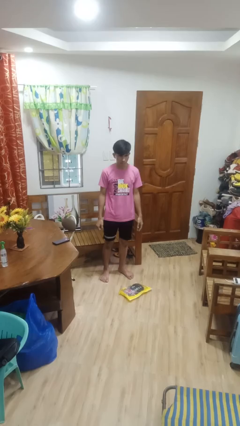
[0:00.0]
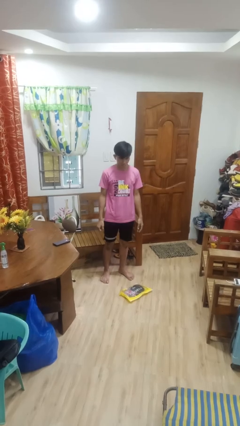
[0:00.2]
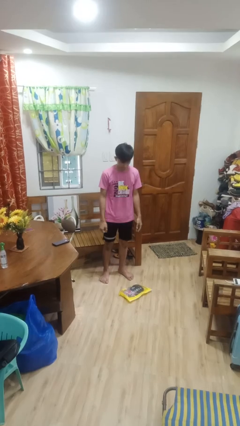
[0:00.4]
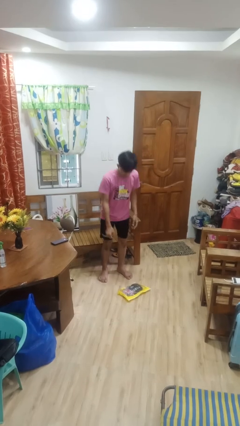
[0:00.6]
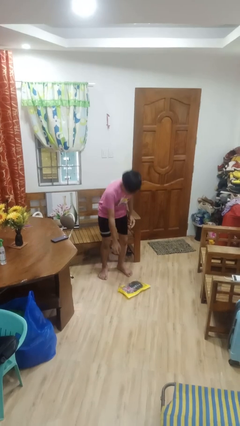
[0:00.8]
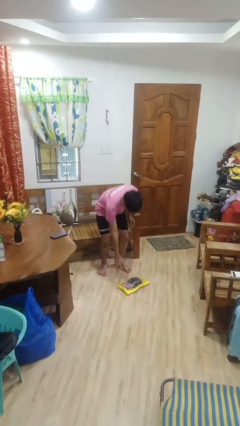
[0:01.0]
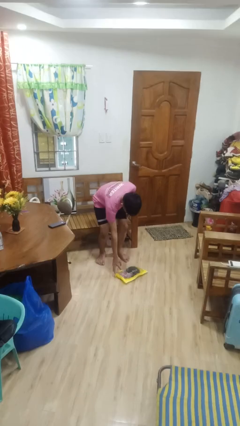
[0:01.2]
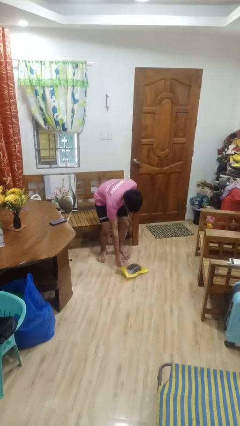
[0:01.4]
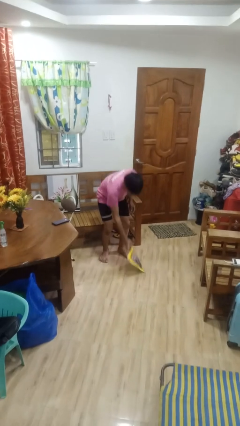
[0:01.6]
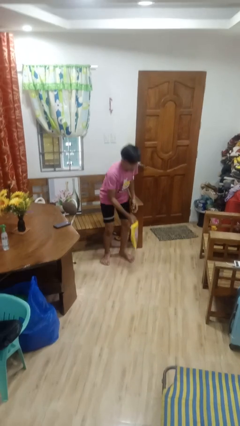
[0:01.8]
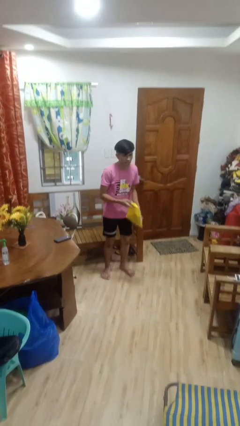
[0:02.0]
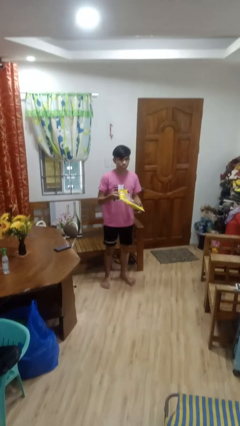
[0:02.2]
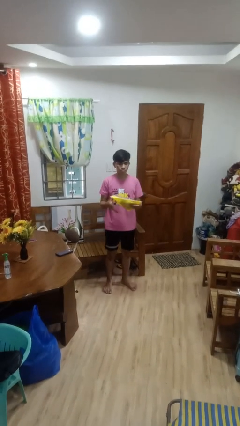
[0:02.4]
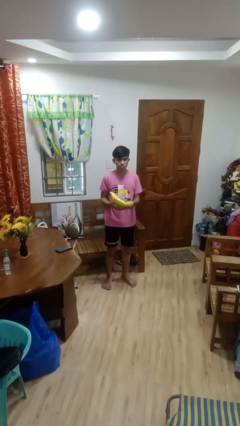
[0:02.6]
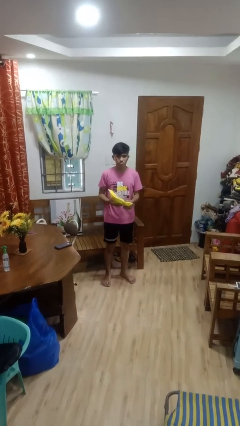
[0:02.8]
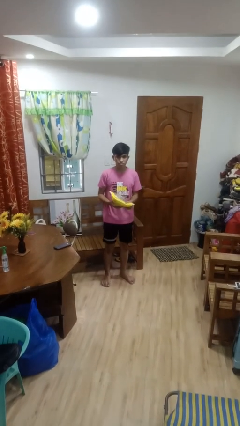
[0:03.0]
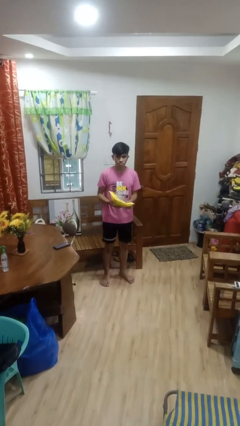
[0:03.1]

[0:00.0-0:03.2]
person picks up object from floor

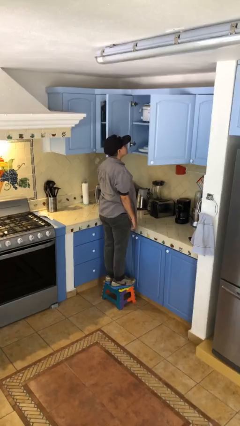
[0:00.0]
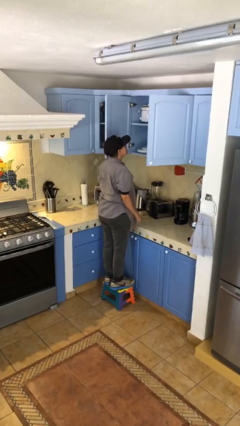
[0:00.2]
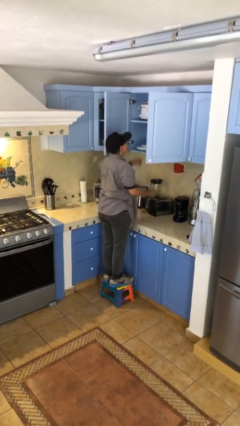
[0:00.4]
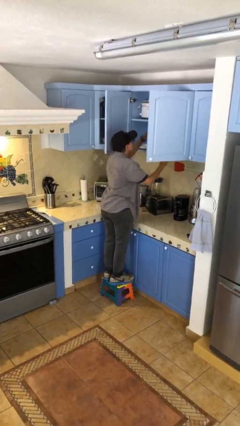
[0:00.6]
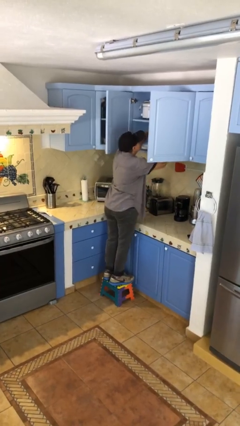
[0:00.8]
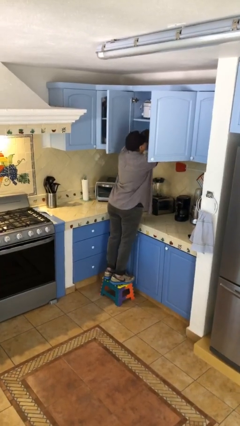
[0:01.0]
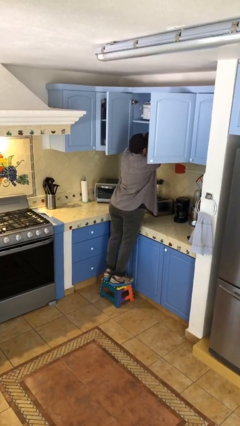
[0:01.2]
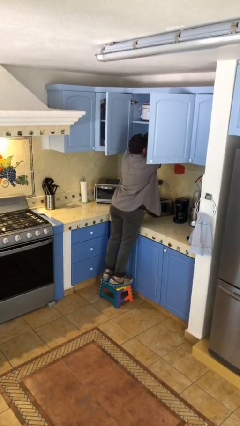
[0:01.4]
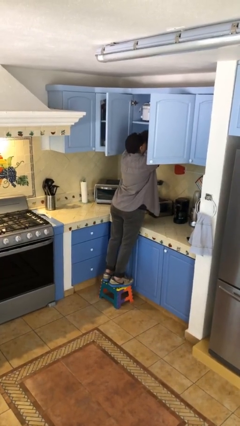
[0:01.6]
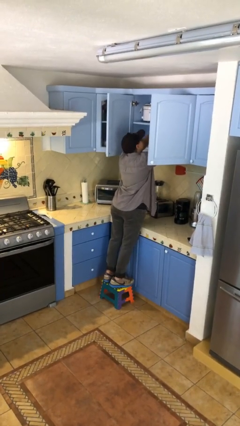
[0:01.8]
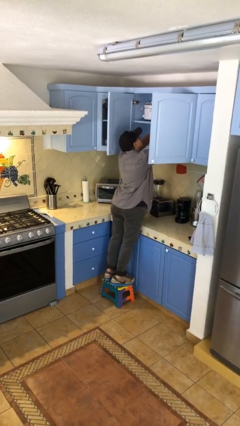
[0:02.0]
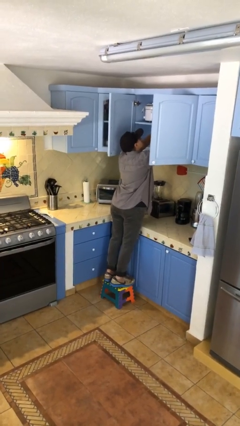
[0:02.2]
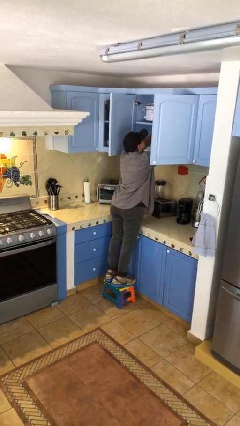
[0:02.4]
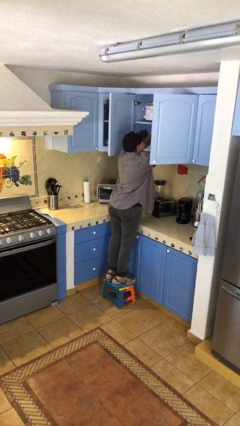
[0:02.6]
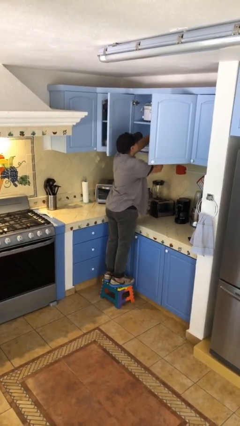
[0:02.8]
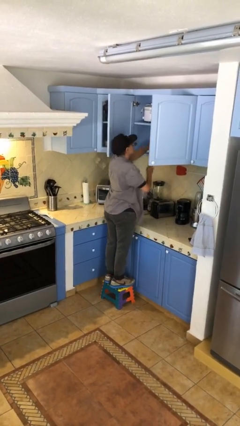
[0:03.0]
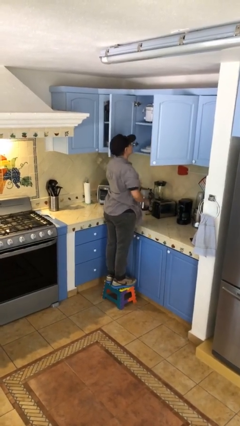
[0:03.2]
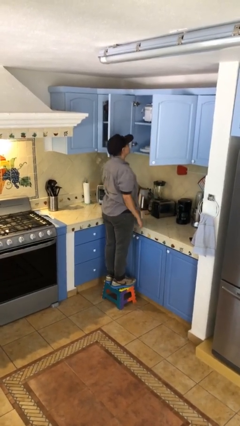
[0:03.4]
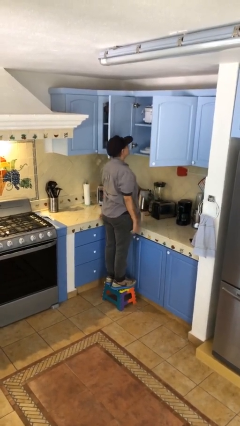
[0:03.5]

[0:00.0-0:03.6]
person searches in cabinet

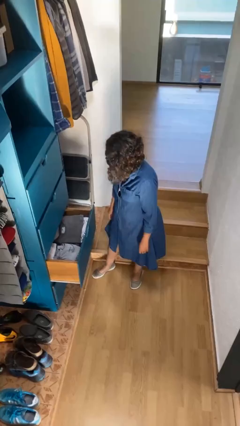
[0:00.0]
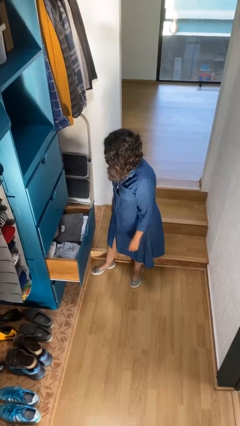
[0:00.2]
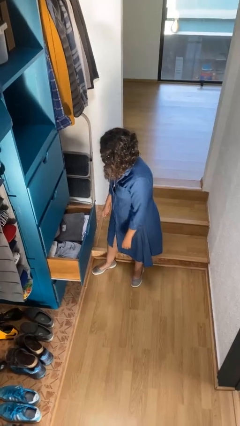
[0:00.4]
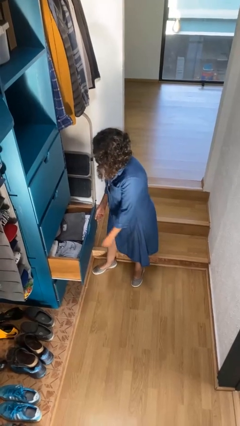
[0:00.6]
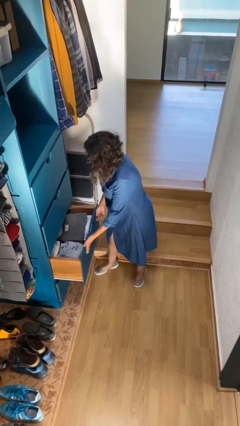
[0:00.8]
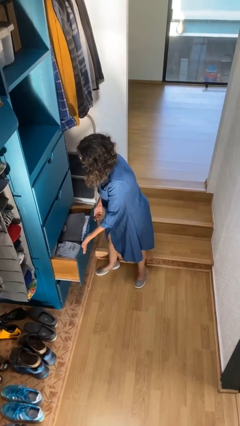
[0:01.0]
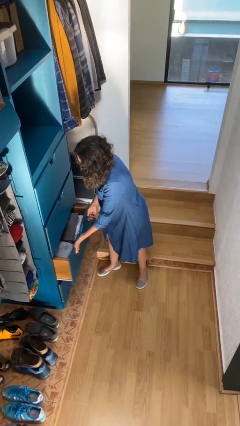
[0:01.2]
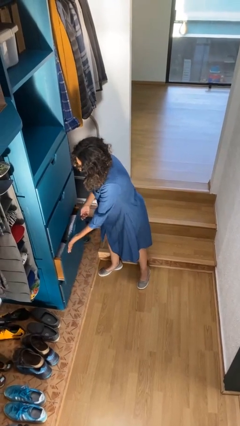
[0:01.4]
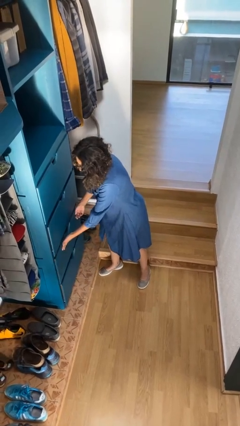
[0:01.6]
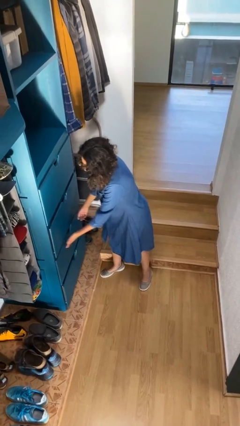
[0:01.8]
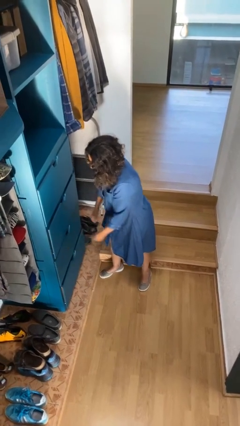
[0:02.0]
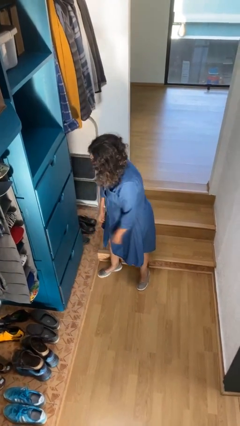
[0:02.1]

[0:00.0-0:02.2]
person closes dresser drawer

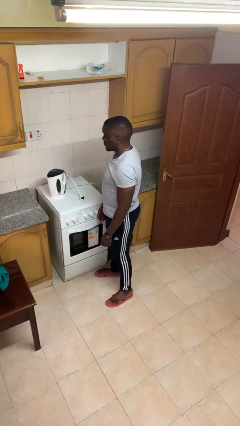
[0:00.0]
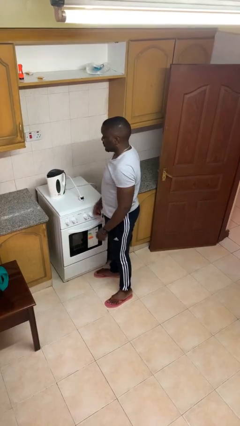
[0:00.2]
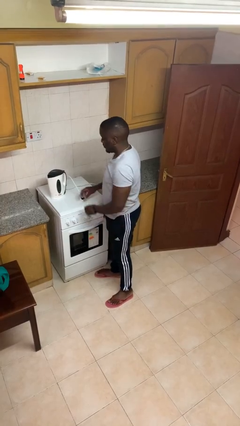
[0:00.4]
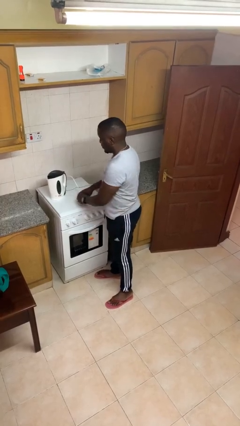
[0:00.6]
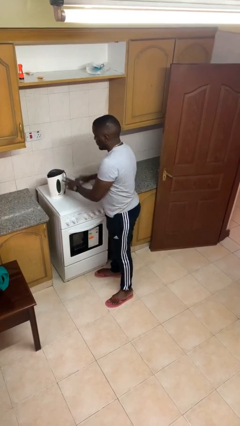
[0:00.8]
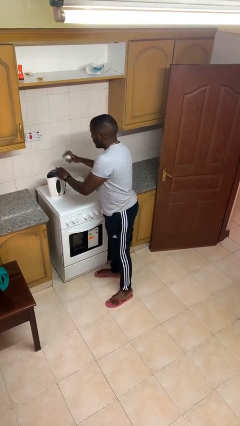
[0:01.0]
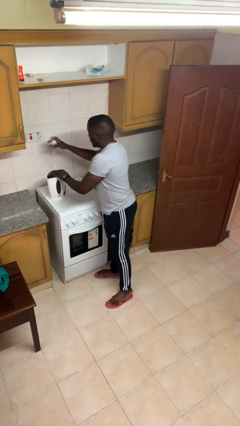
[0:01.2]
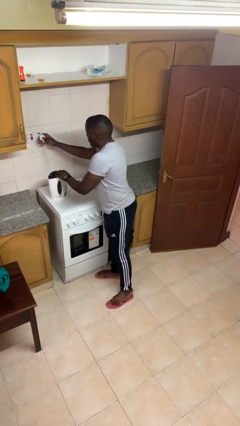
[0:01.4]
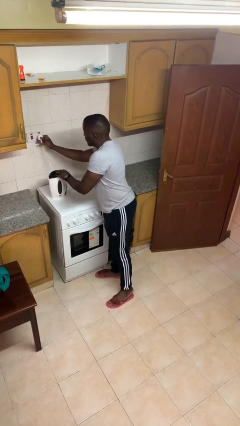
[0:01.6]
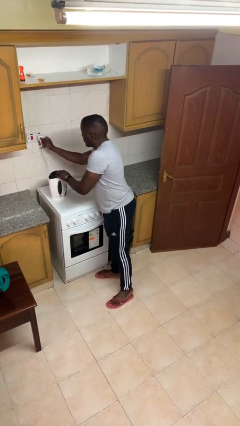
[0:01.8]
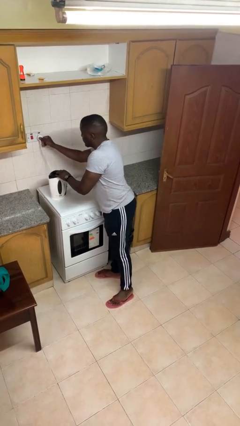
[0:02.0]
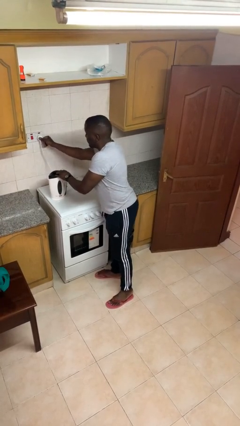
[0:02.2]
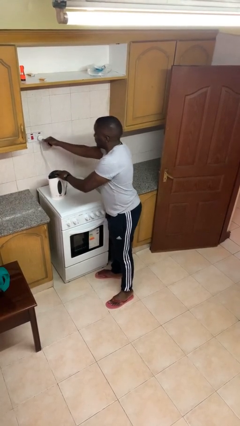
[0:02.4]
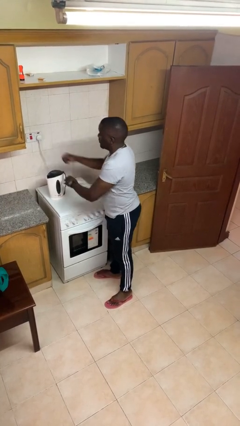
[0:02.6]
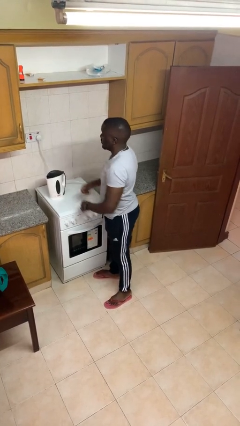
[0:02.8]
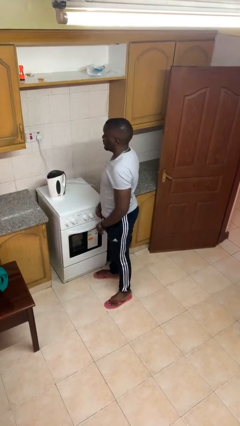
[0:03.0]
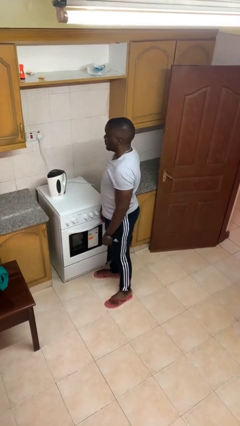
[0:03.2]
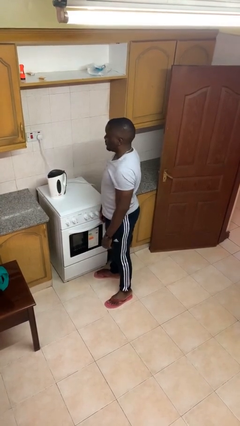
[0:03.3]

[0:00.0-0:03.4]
person plugs into electrical socket

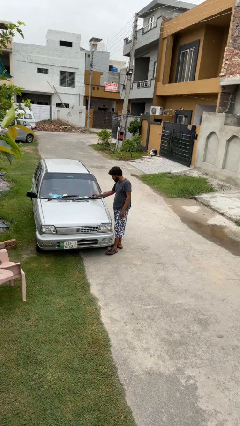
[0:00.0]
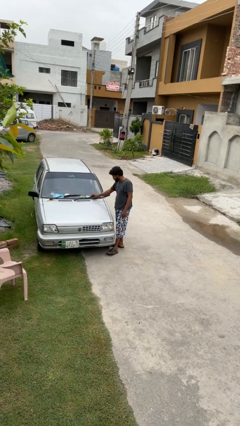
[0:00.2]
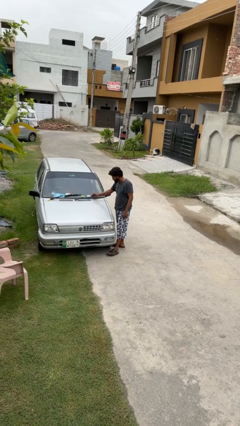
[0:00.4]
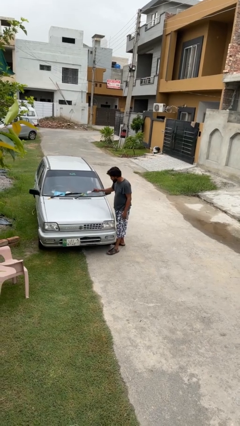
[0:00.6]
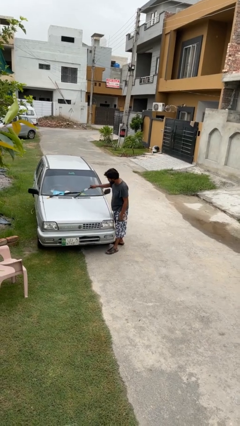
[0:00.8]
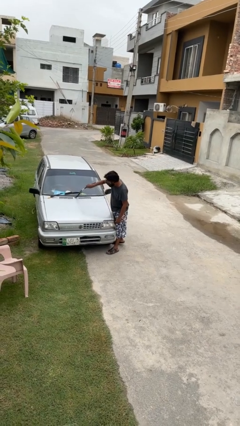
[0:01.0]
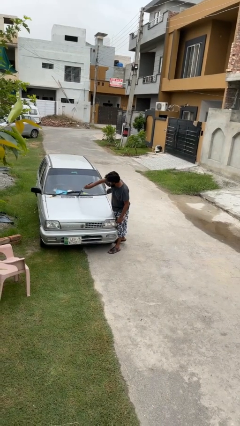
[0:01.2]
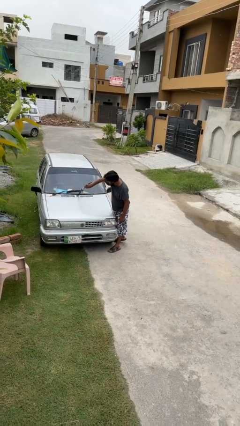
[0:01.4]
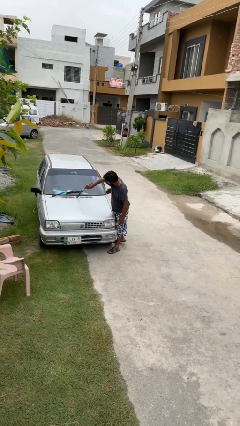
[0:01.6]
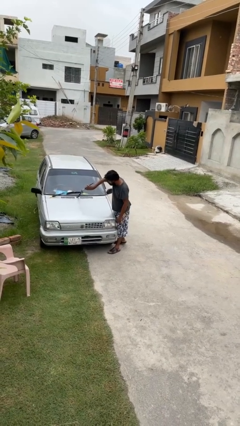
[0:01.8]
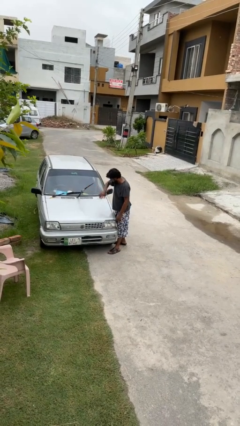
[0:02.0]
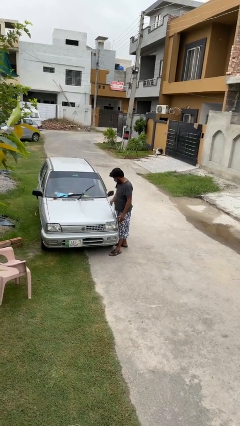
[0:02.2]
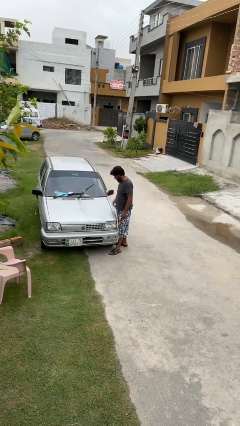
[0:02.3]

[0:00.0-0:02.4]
person flips up car wipers

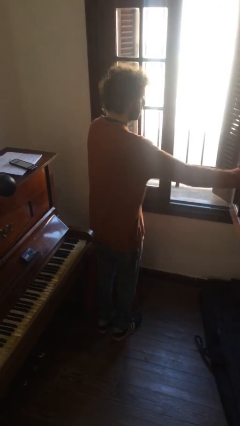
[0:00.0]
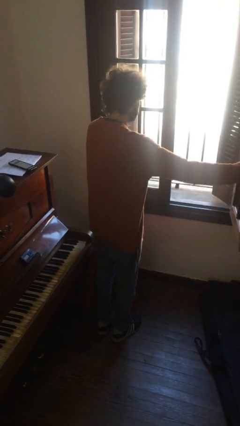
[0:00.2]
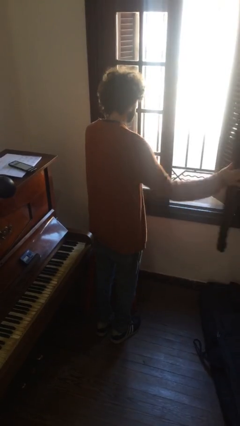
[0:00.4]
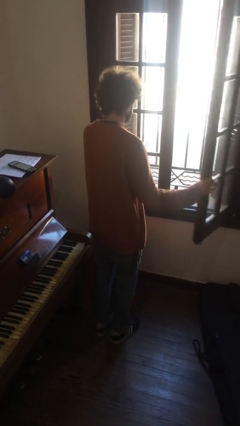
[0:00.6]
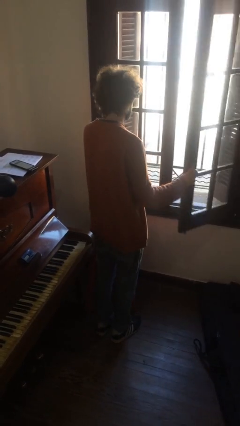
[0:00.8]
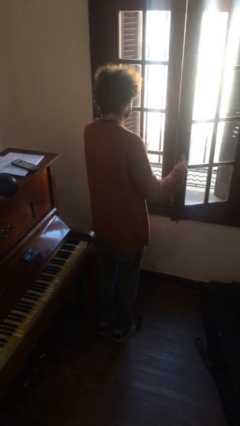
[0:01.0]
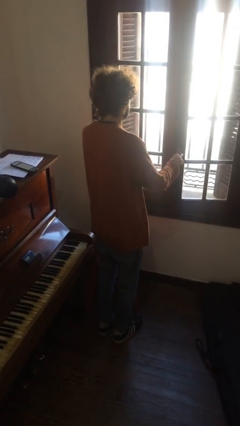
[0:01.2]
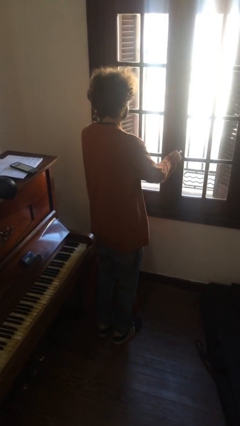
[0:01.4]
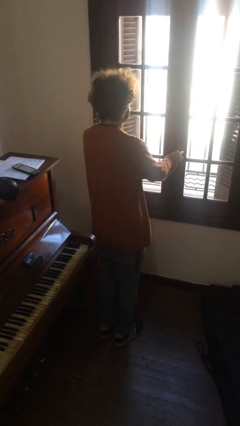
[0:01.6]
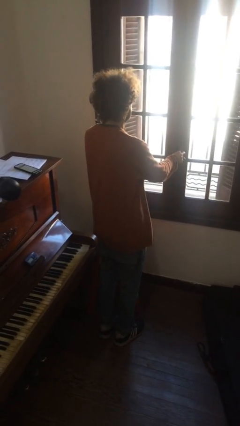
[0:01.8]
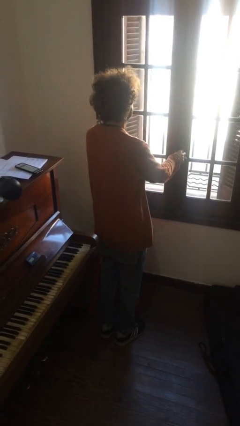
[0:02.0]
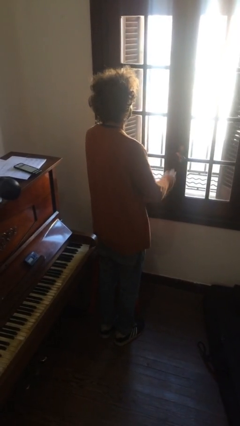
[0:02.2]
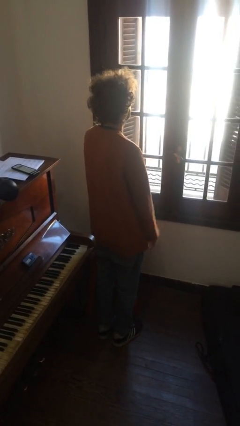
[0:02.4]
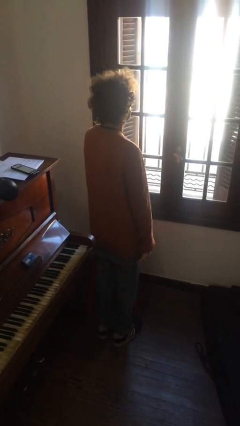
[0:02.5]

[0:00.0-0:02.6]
person closes home window

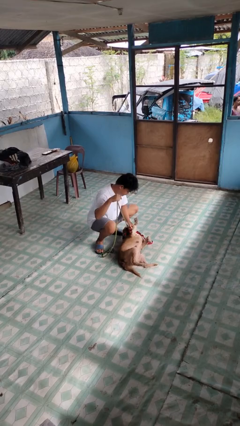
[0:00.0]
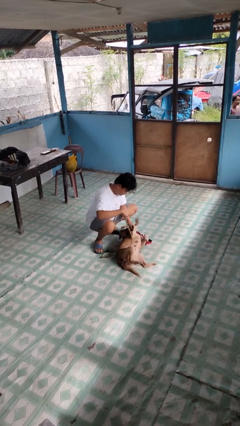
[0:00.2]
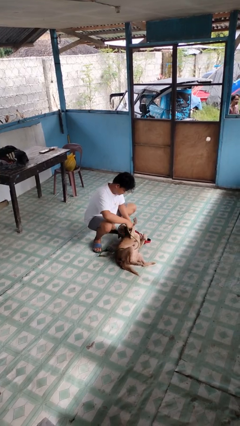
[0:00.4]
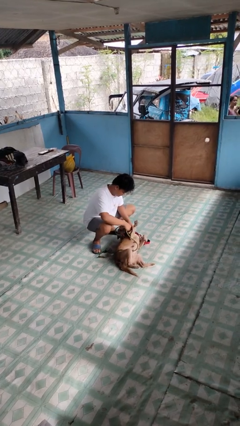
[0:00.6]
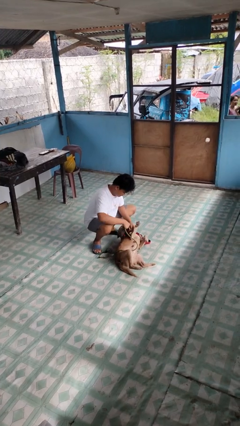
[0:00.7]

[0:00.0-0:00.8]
person unattaches leash from dog
